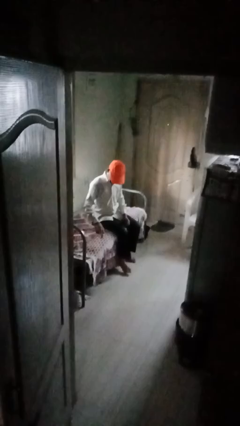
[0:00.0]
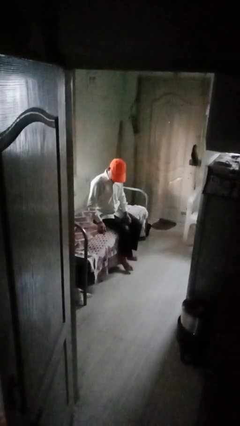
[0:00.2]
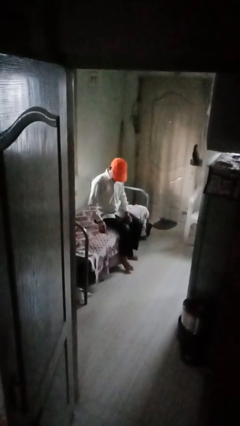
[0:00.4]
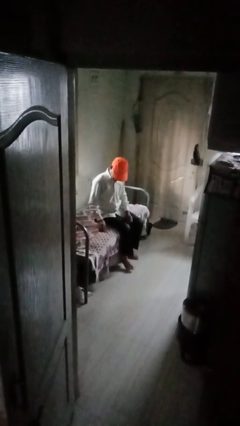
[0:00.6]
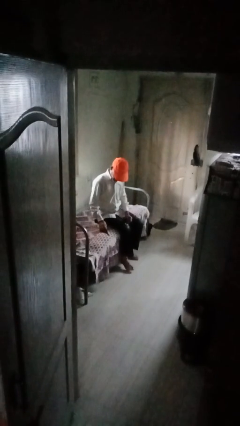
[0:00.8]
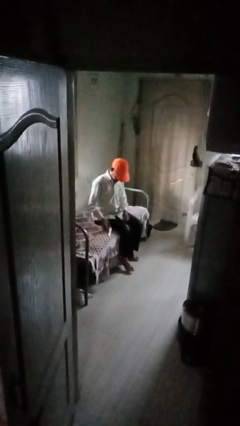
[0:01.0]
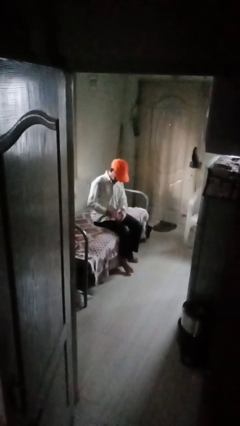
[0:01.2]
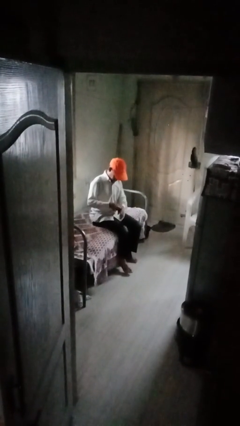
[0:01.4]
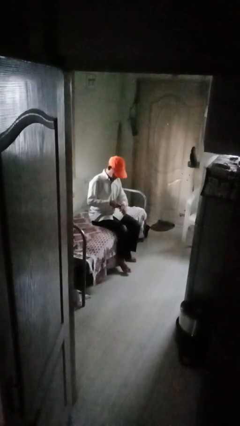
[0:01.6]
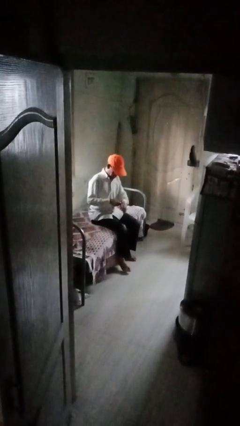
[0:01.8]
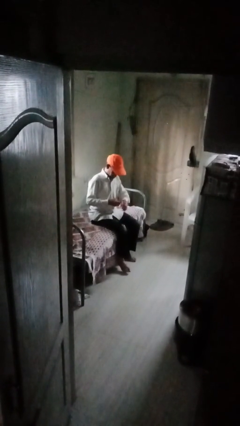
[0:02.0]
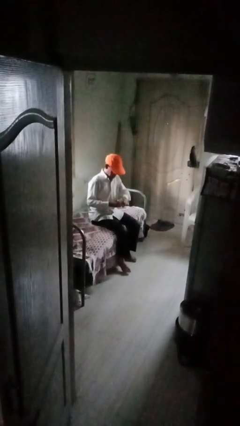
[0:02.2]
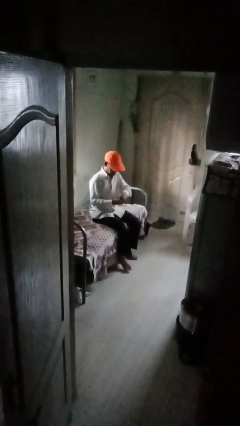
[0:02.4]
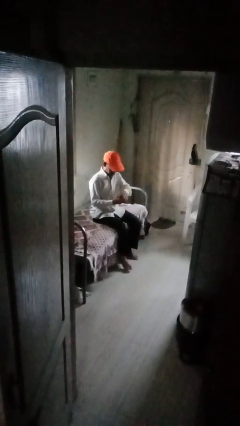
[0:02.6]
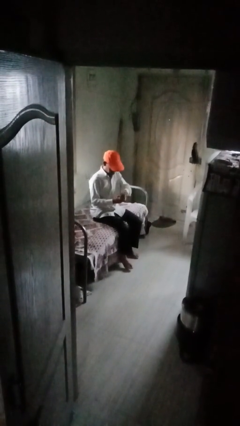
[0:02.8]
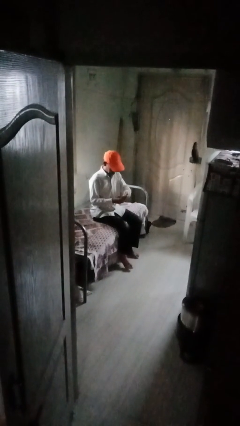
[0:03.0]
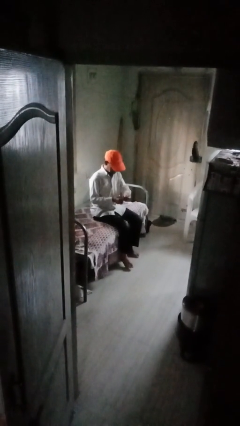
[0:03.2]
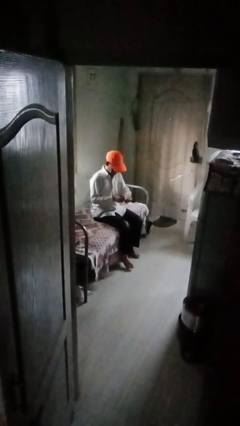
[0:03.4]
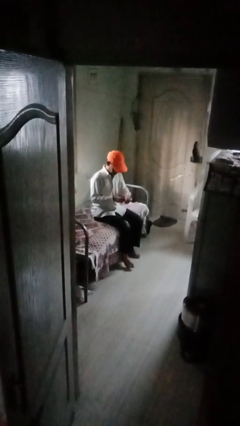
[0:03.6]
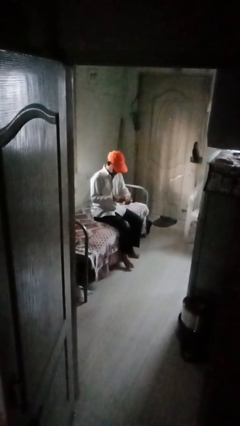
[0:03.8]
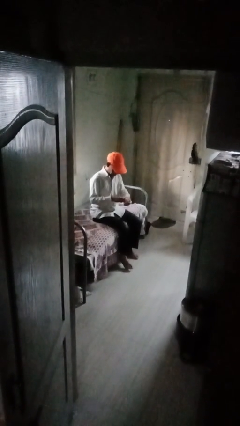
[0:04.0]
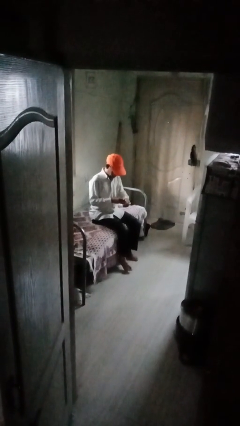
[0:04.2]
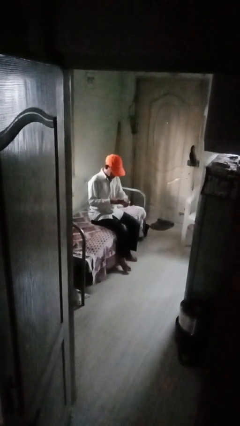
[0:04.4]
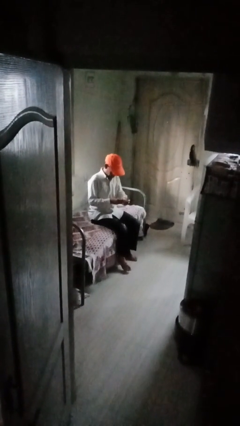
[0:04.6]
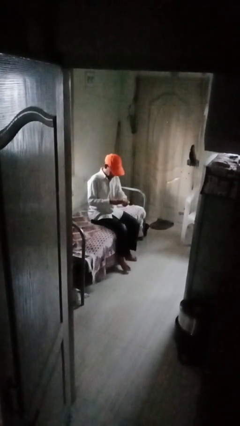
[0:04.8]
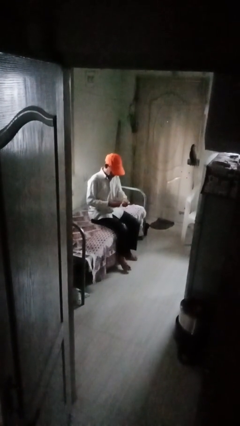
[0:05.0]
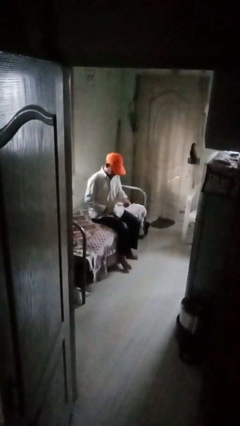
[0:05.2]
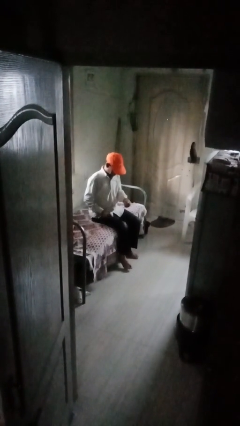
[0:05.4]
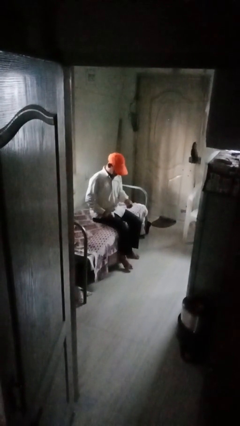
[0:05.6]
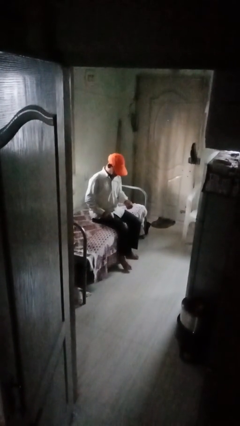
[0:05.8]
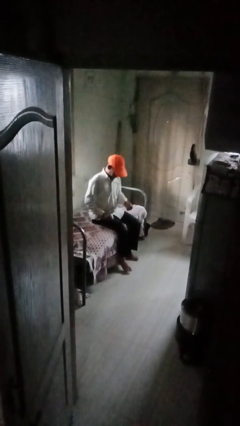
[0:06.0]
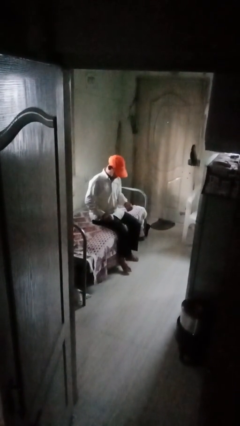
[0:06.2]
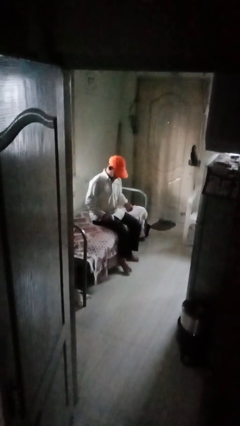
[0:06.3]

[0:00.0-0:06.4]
person puts on wristwatch

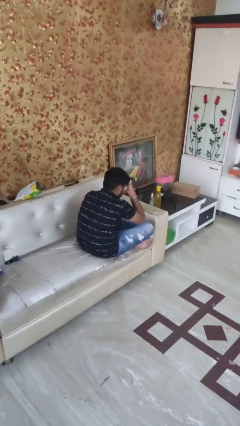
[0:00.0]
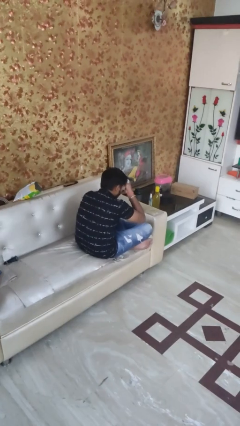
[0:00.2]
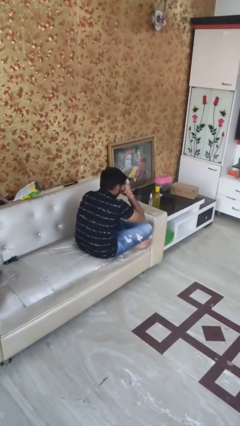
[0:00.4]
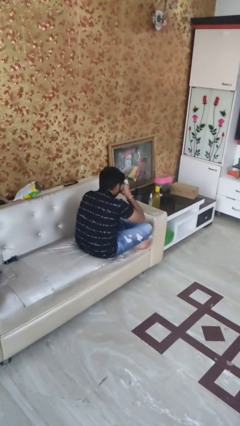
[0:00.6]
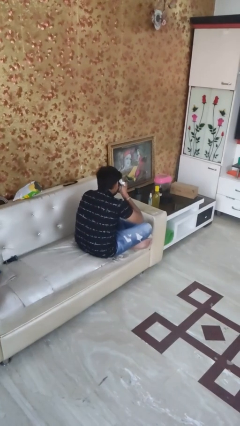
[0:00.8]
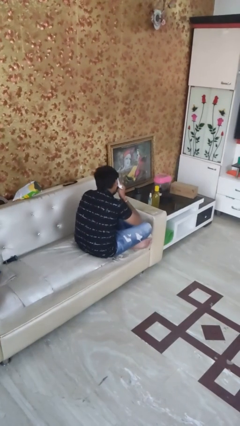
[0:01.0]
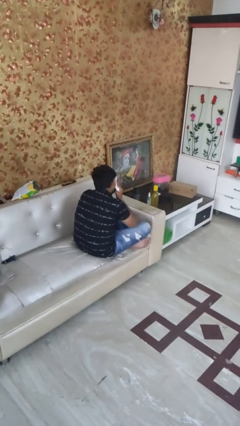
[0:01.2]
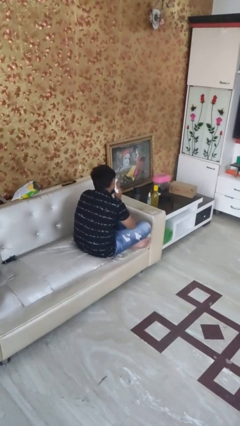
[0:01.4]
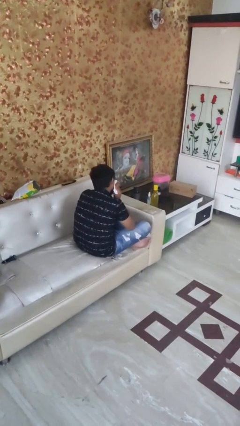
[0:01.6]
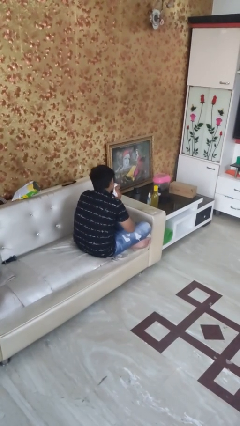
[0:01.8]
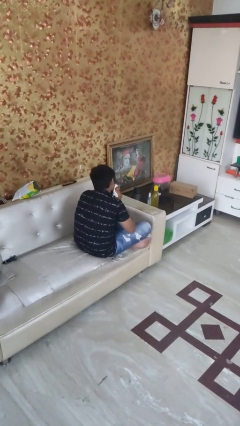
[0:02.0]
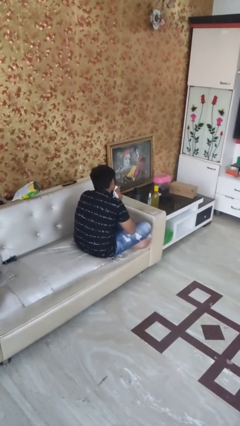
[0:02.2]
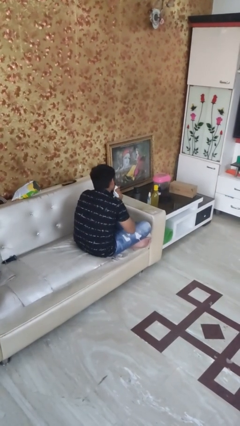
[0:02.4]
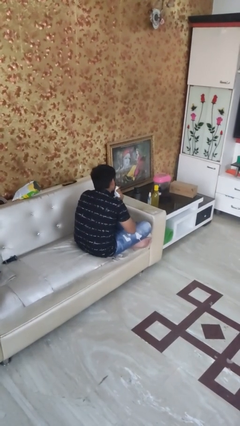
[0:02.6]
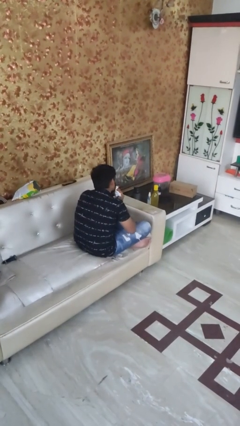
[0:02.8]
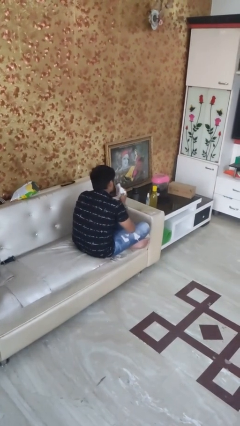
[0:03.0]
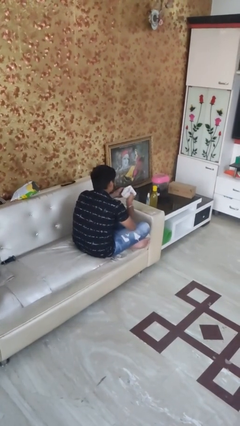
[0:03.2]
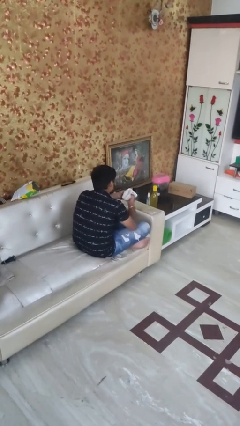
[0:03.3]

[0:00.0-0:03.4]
person wipes mouth with napkin

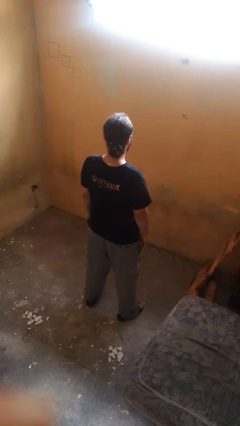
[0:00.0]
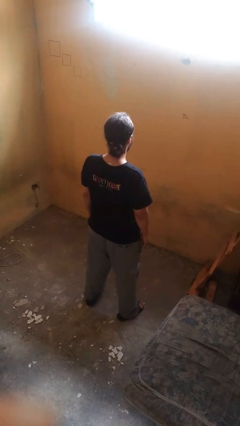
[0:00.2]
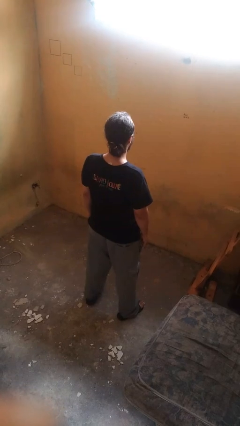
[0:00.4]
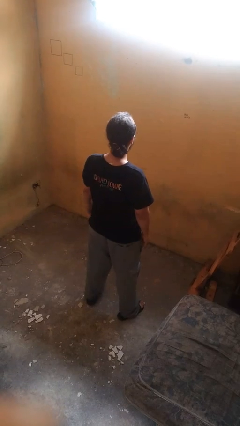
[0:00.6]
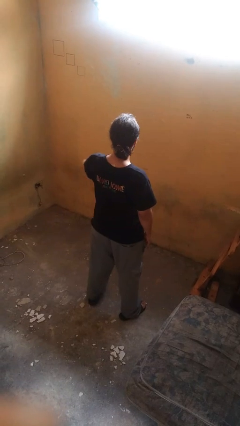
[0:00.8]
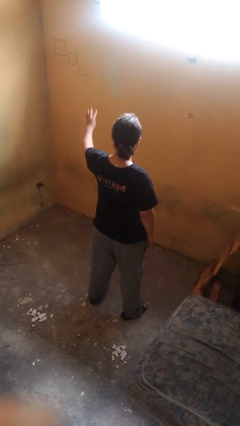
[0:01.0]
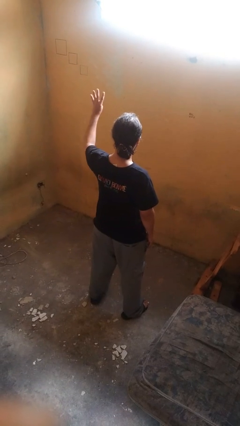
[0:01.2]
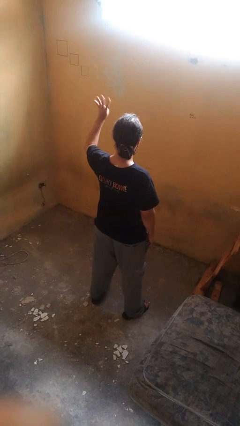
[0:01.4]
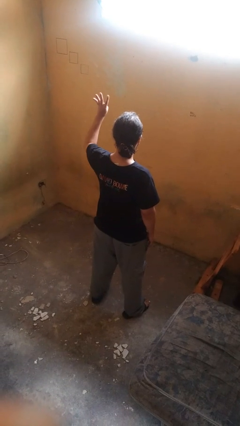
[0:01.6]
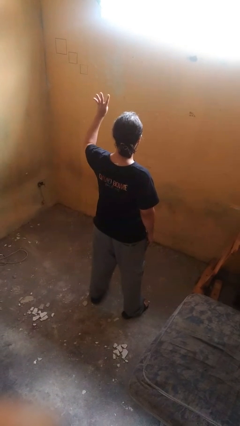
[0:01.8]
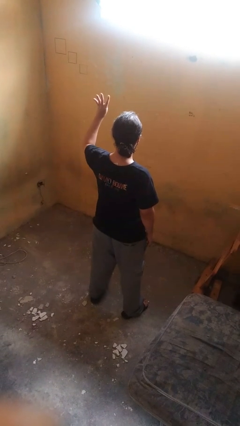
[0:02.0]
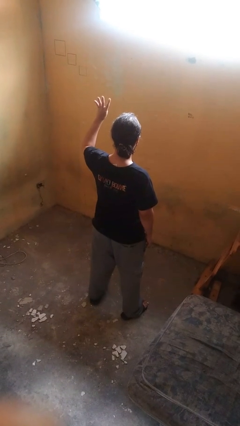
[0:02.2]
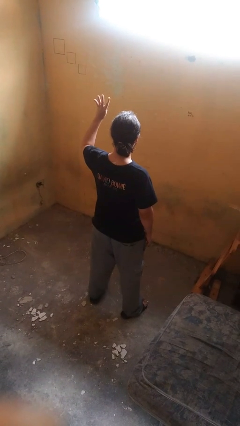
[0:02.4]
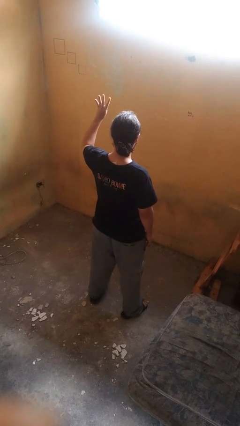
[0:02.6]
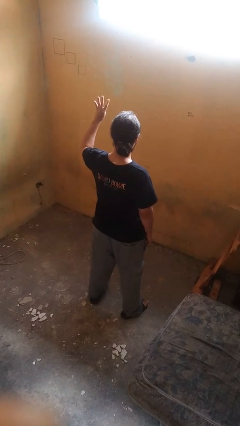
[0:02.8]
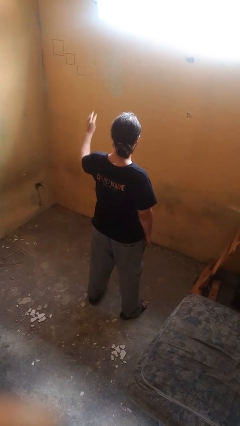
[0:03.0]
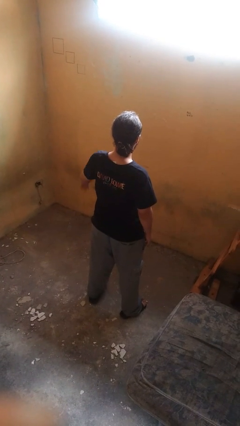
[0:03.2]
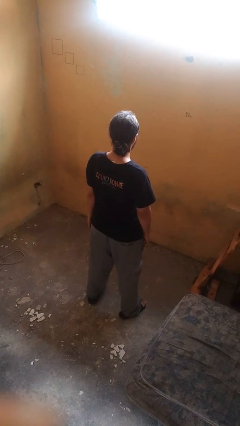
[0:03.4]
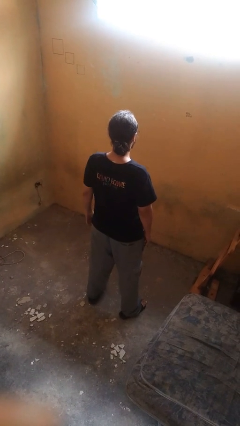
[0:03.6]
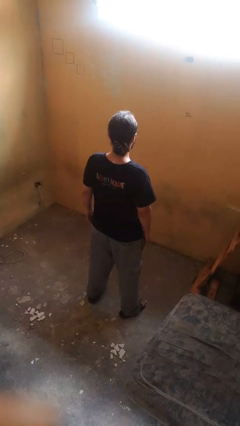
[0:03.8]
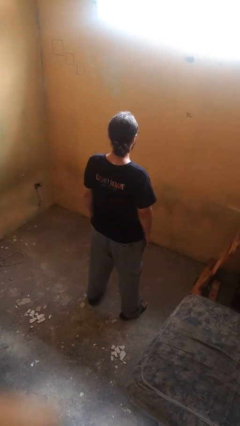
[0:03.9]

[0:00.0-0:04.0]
person gestures number four

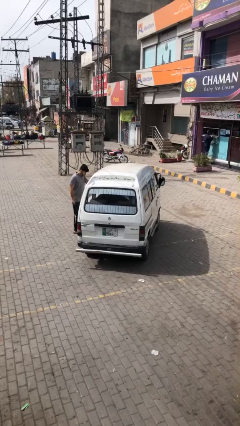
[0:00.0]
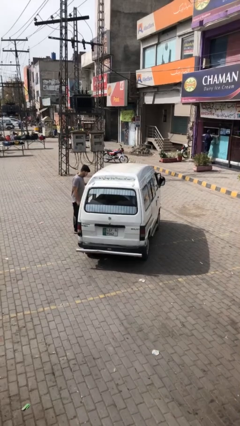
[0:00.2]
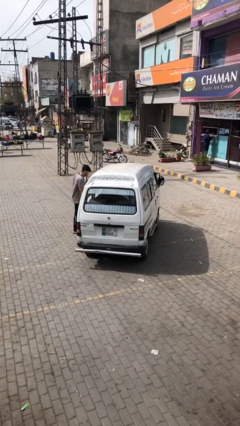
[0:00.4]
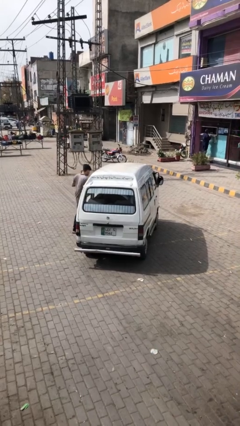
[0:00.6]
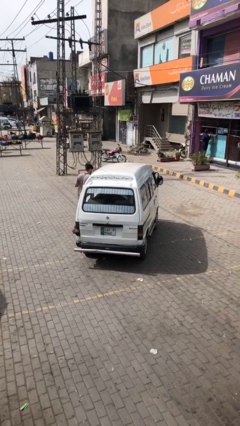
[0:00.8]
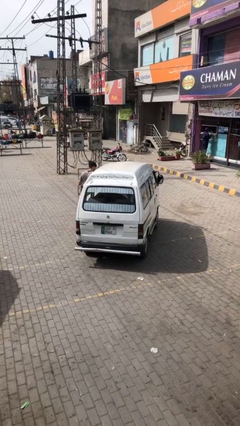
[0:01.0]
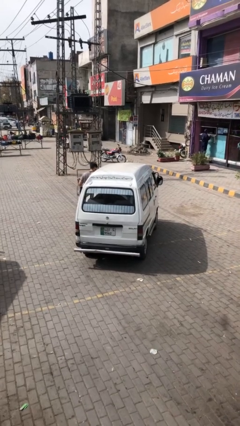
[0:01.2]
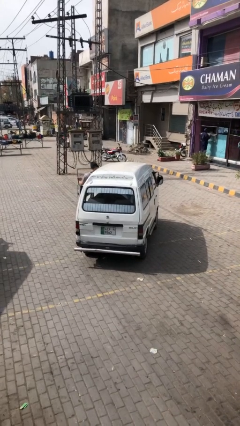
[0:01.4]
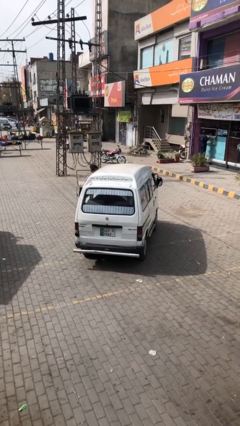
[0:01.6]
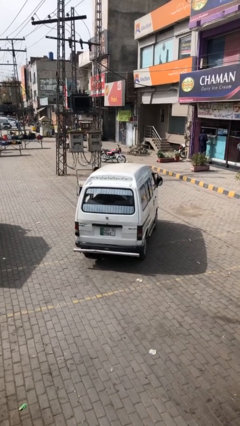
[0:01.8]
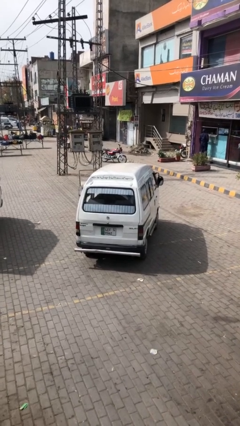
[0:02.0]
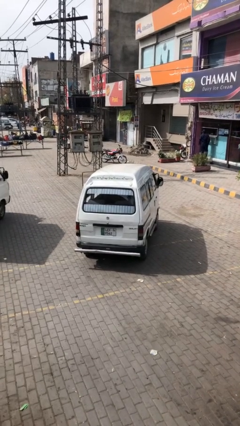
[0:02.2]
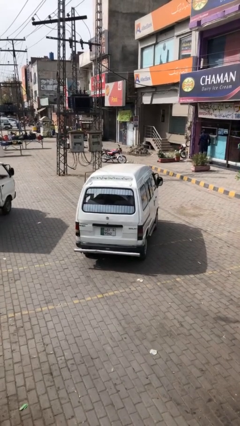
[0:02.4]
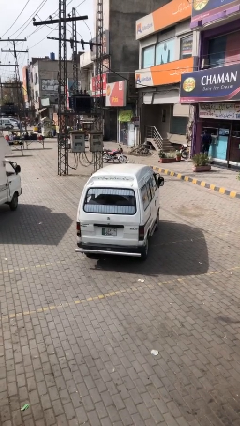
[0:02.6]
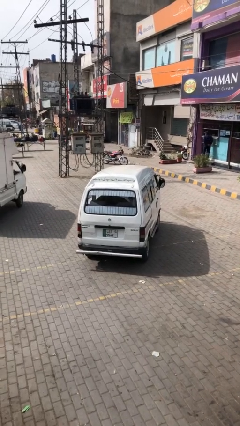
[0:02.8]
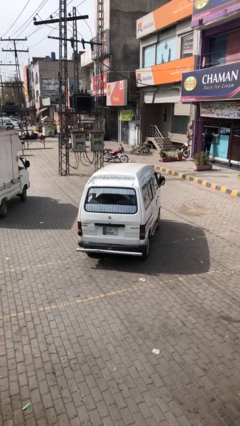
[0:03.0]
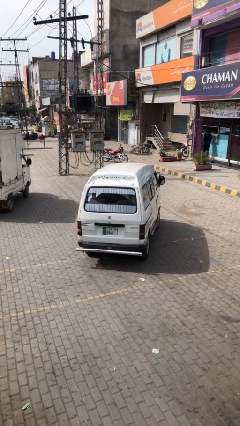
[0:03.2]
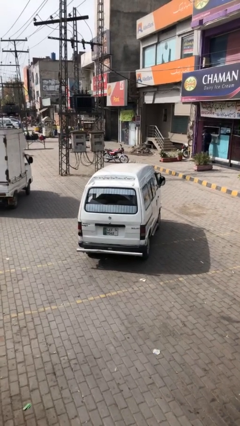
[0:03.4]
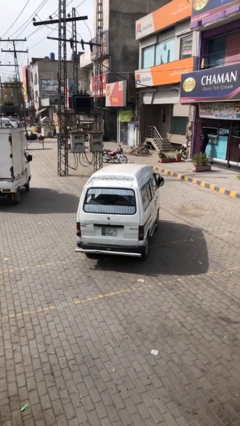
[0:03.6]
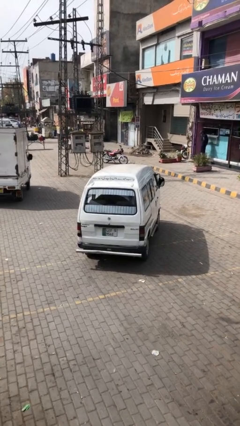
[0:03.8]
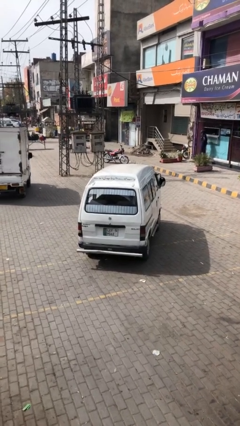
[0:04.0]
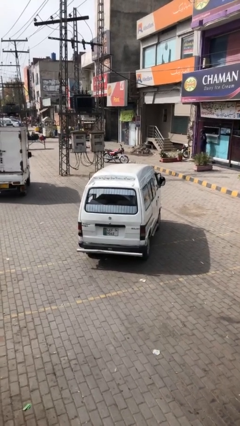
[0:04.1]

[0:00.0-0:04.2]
car picks up person
